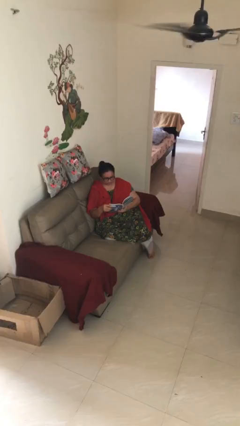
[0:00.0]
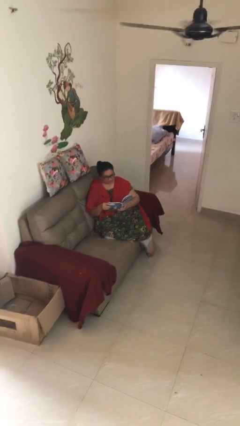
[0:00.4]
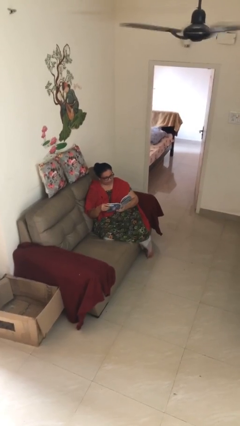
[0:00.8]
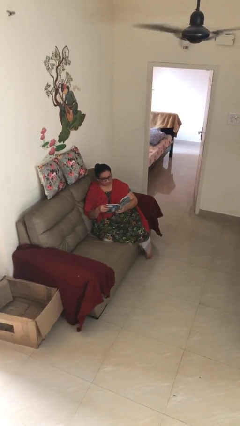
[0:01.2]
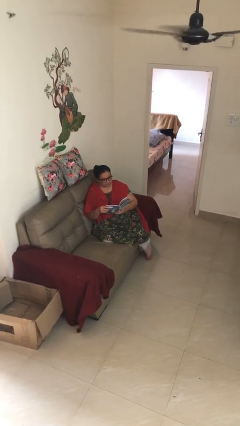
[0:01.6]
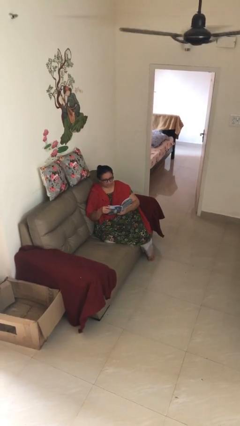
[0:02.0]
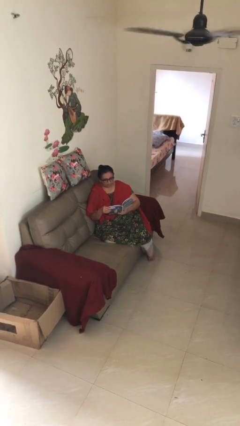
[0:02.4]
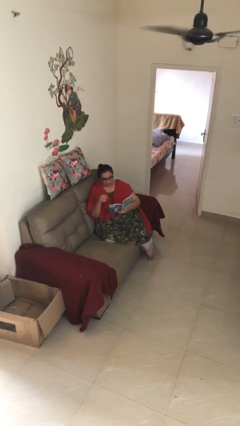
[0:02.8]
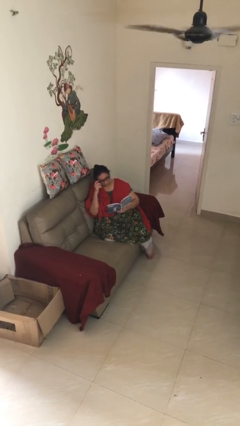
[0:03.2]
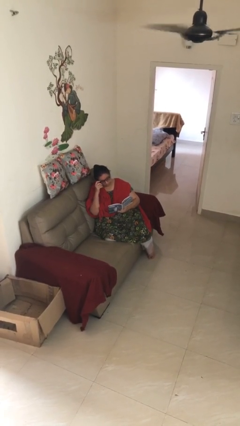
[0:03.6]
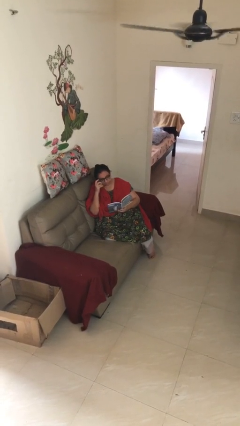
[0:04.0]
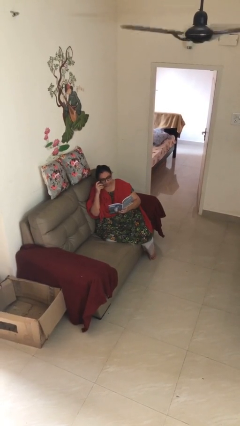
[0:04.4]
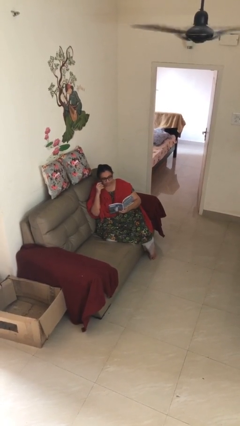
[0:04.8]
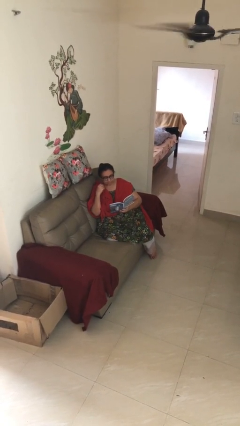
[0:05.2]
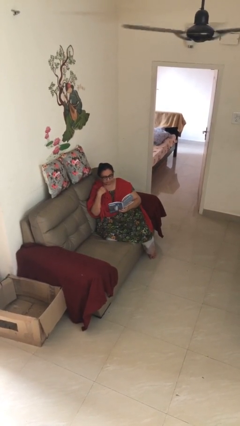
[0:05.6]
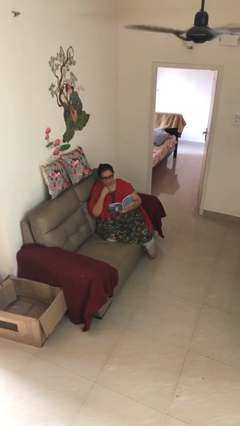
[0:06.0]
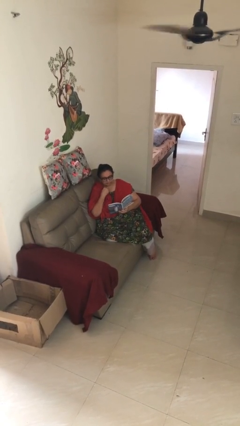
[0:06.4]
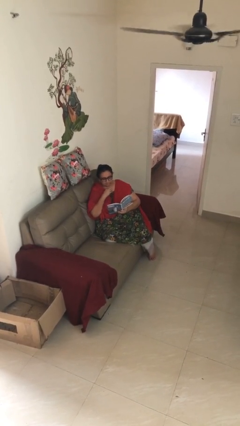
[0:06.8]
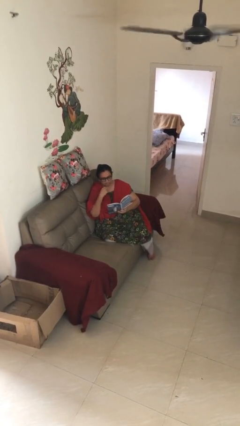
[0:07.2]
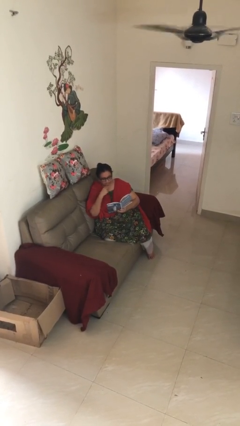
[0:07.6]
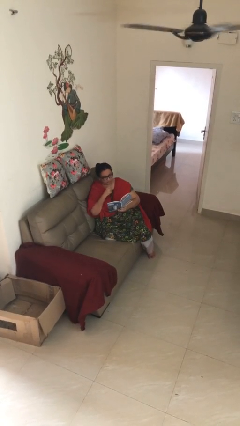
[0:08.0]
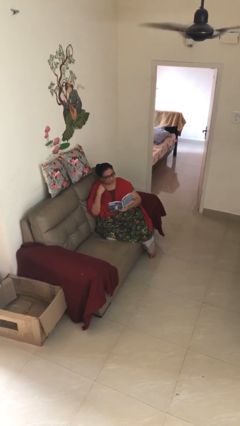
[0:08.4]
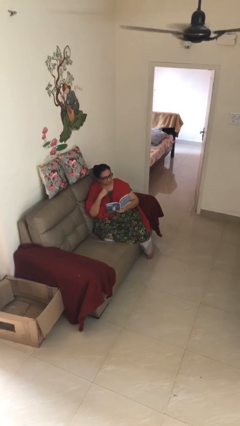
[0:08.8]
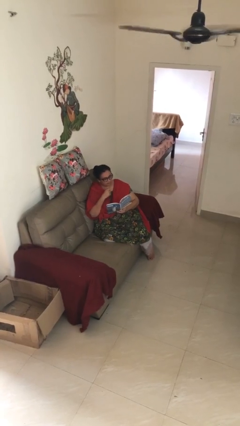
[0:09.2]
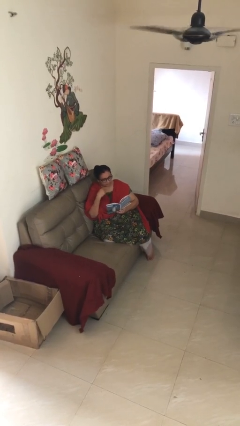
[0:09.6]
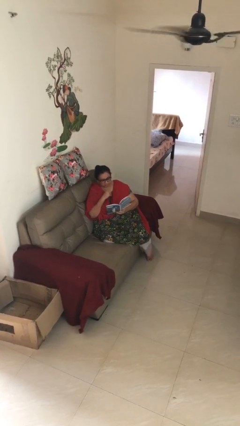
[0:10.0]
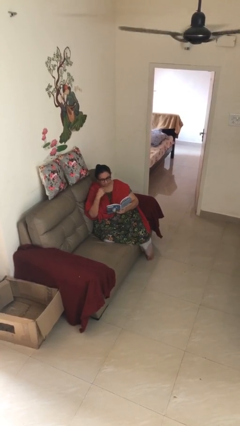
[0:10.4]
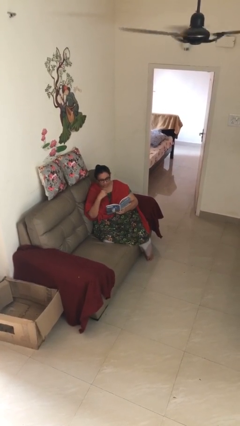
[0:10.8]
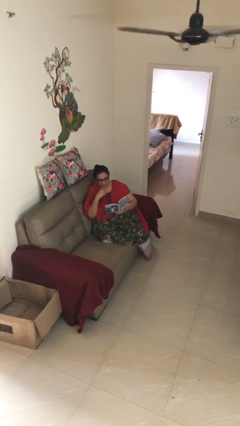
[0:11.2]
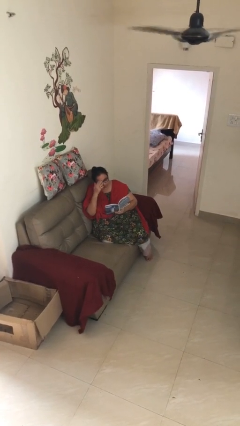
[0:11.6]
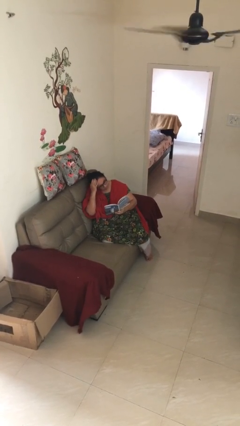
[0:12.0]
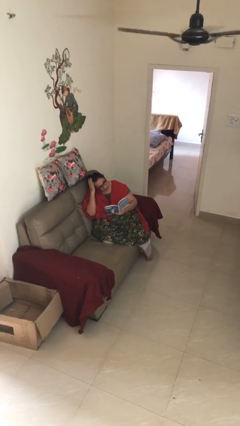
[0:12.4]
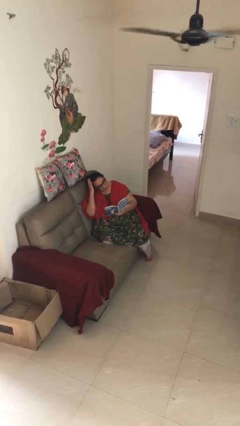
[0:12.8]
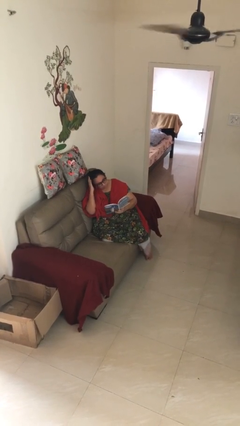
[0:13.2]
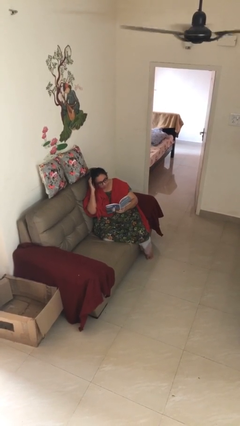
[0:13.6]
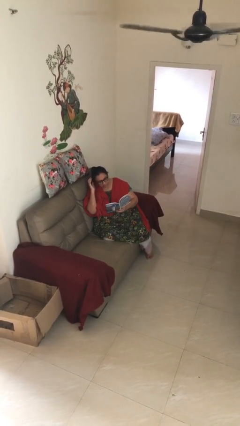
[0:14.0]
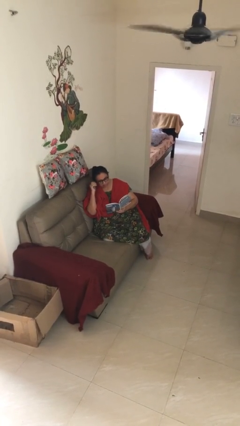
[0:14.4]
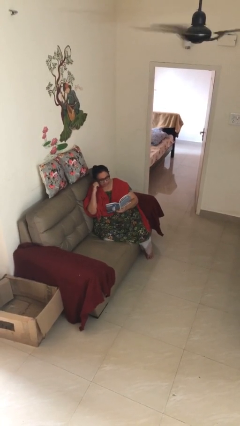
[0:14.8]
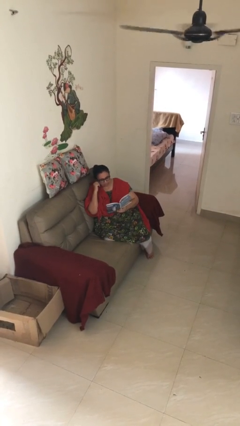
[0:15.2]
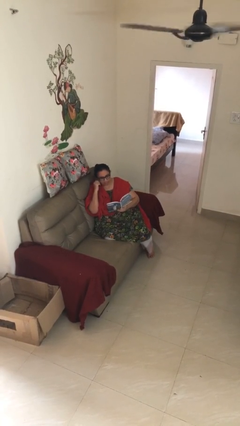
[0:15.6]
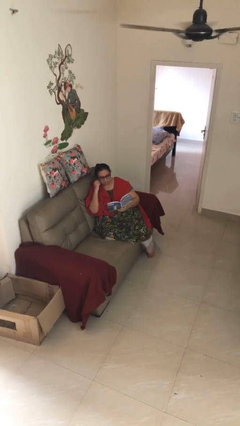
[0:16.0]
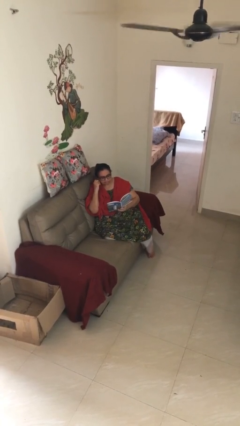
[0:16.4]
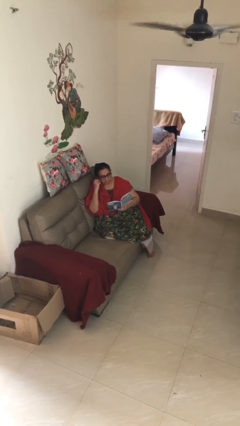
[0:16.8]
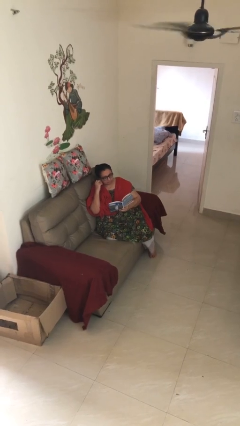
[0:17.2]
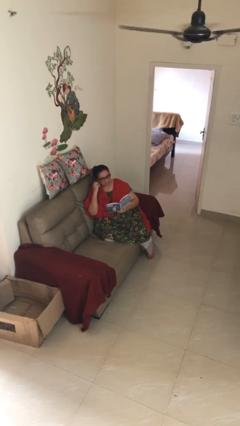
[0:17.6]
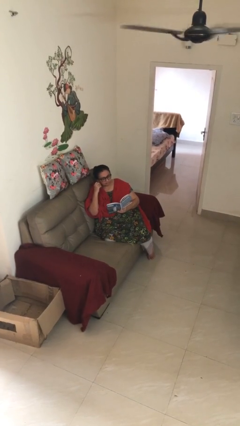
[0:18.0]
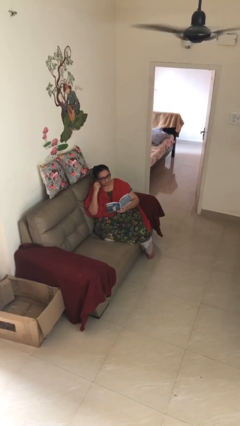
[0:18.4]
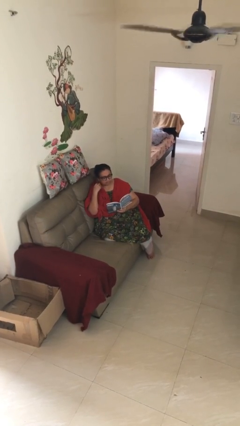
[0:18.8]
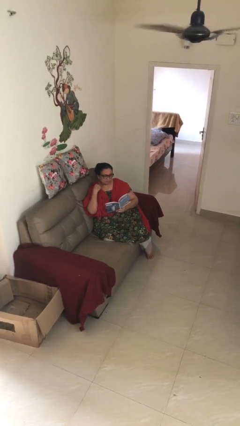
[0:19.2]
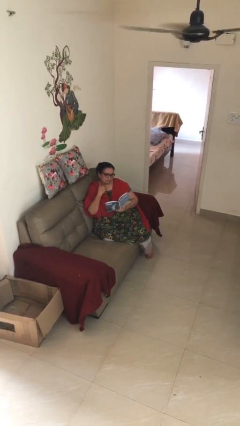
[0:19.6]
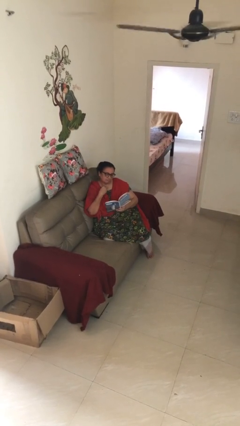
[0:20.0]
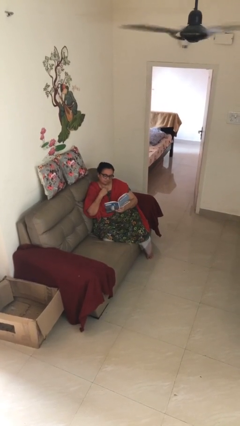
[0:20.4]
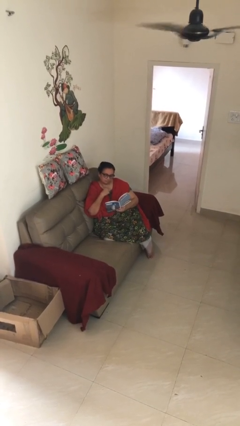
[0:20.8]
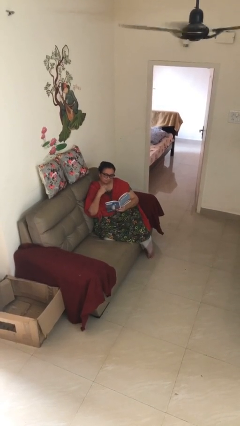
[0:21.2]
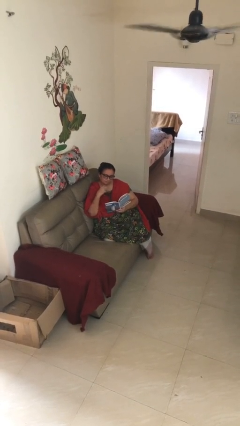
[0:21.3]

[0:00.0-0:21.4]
person reads document

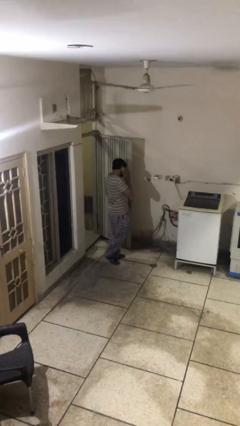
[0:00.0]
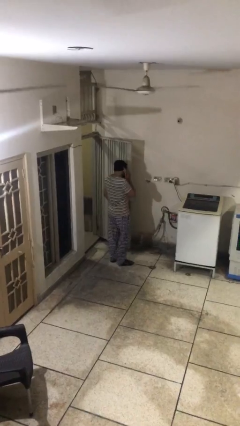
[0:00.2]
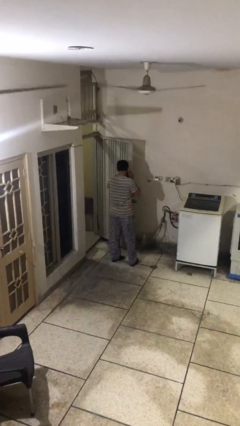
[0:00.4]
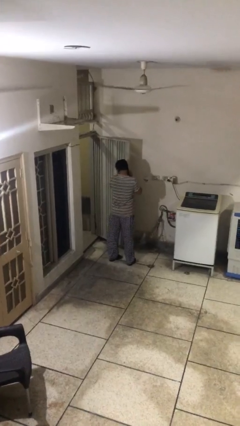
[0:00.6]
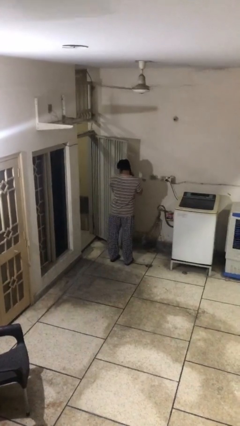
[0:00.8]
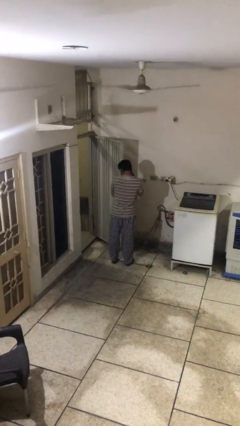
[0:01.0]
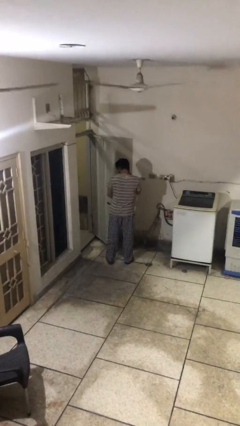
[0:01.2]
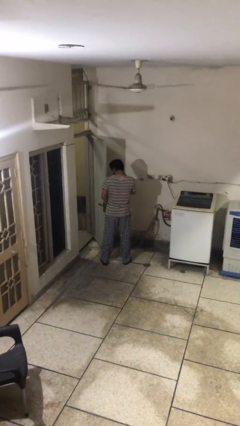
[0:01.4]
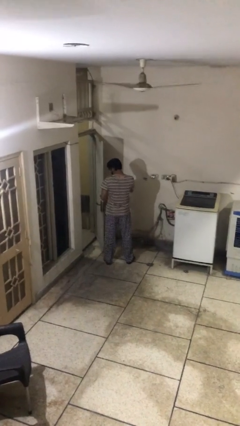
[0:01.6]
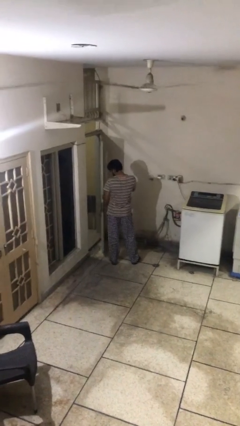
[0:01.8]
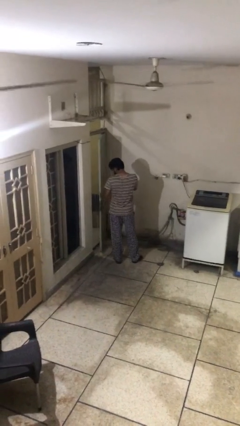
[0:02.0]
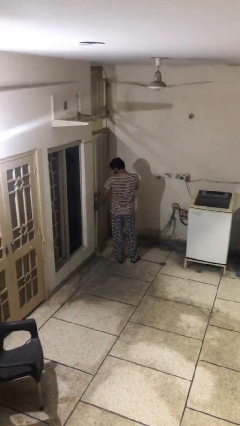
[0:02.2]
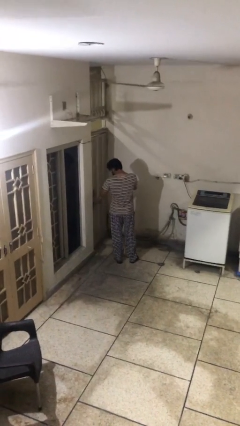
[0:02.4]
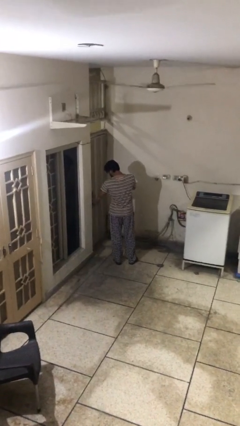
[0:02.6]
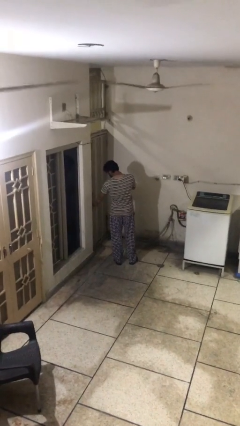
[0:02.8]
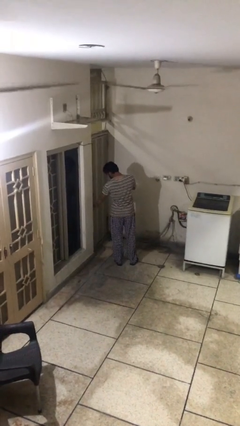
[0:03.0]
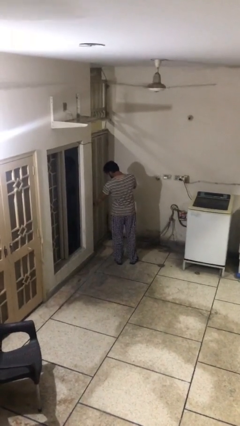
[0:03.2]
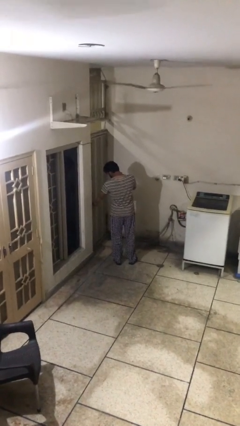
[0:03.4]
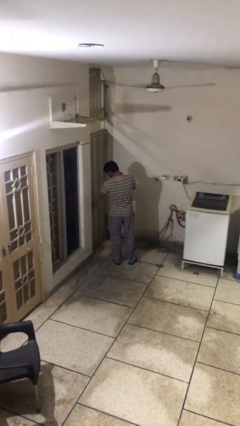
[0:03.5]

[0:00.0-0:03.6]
person closes facility door

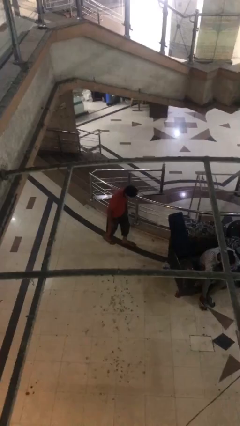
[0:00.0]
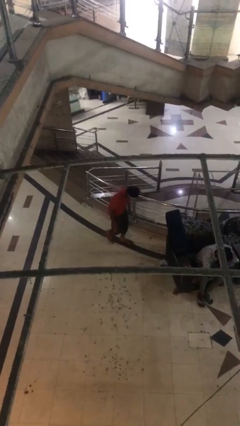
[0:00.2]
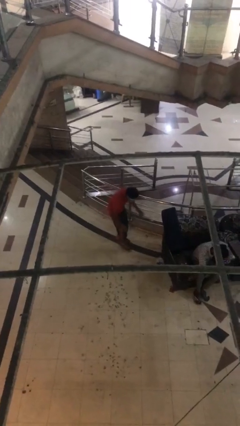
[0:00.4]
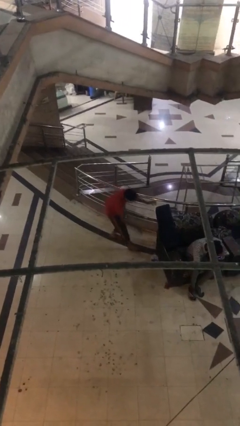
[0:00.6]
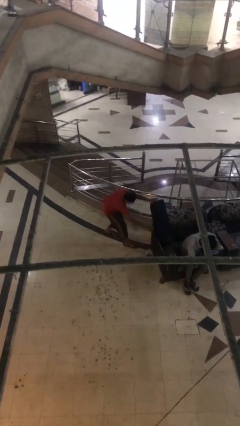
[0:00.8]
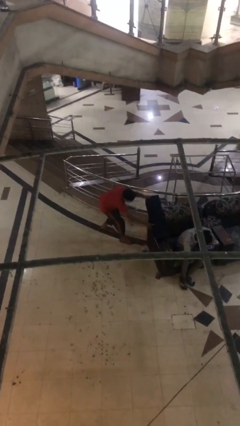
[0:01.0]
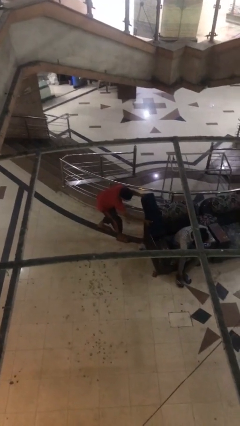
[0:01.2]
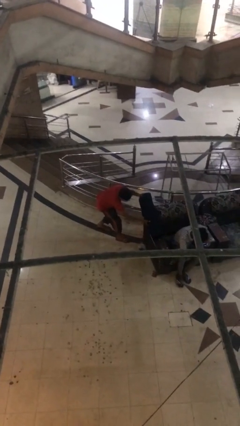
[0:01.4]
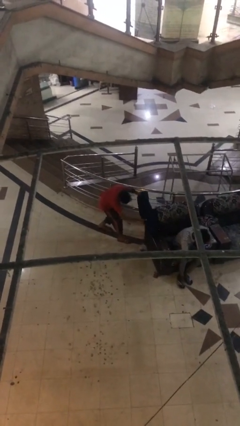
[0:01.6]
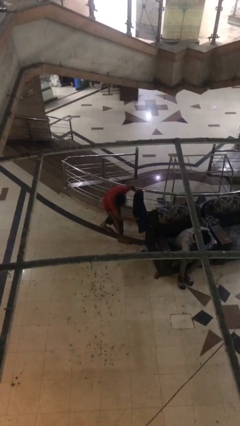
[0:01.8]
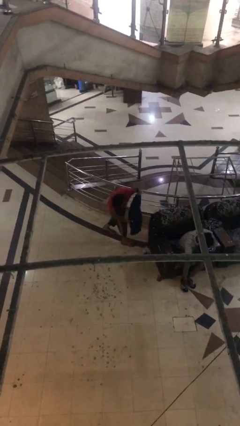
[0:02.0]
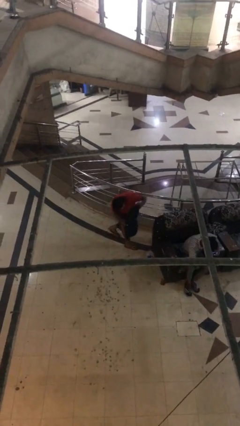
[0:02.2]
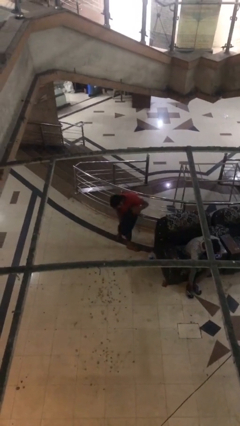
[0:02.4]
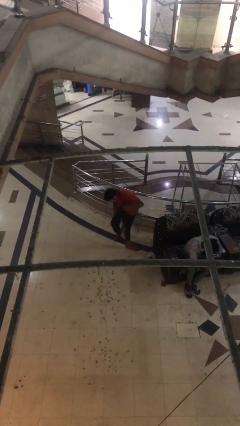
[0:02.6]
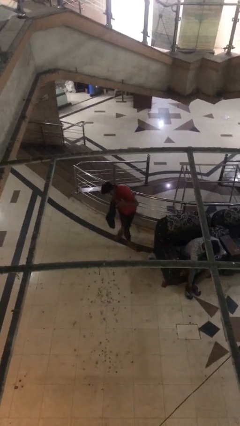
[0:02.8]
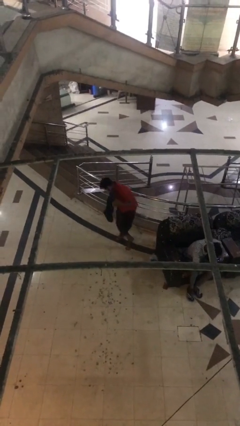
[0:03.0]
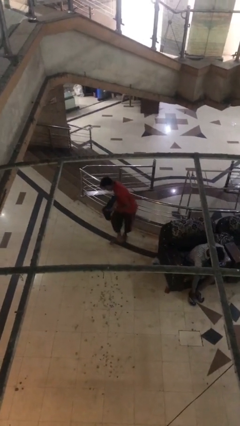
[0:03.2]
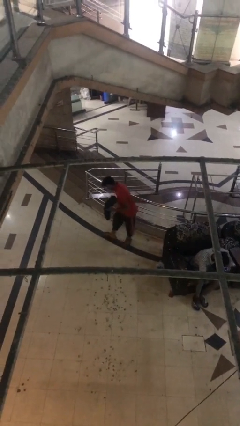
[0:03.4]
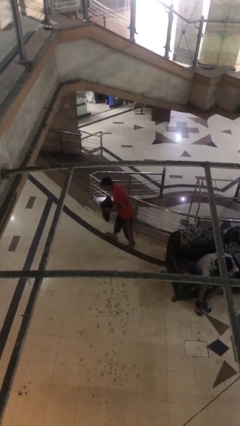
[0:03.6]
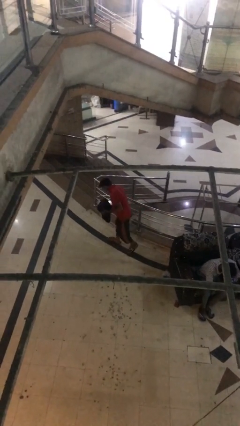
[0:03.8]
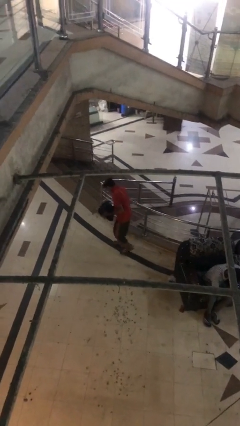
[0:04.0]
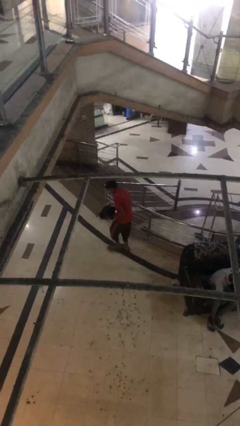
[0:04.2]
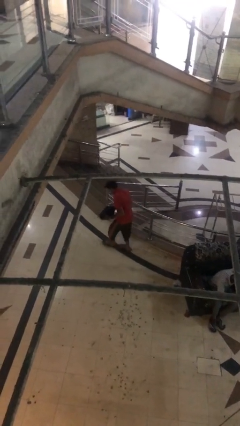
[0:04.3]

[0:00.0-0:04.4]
person steals object from person
